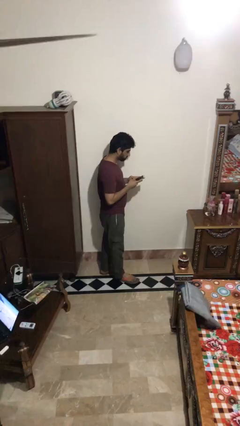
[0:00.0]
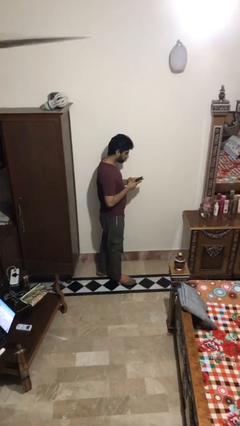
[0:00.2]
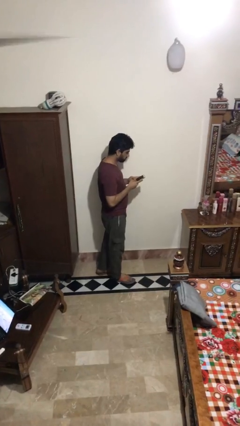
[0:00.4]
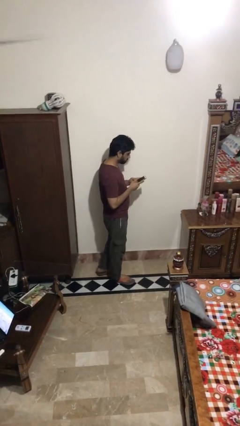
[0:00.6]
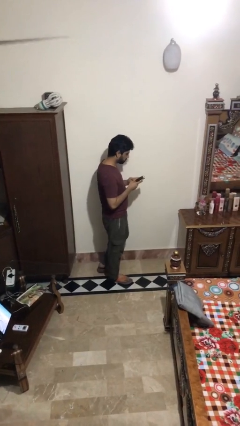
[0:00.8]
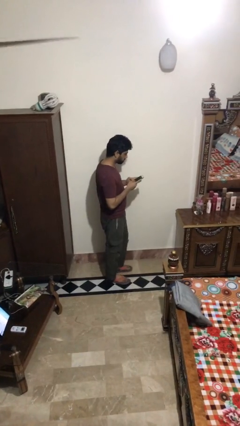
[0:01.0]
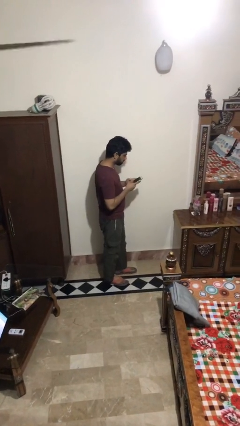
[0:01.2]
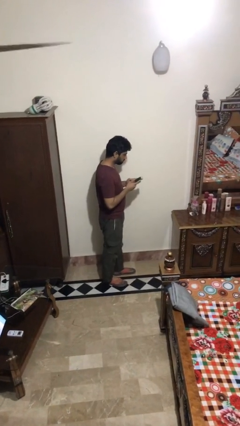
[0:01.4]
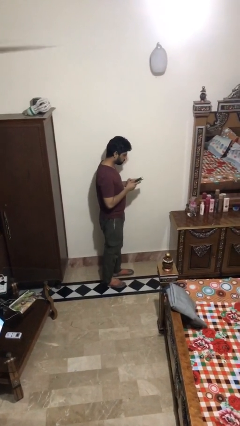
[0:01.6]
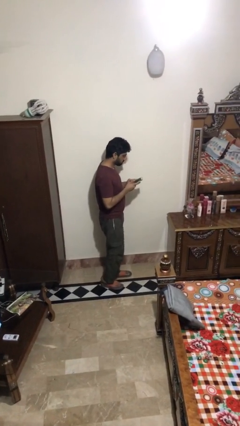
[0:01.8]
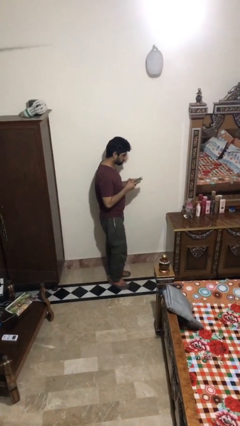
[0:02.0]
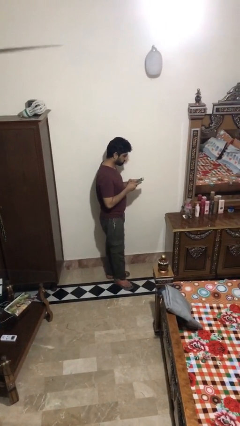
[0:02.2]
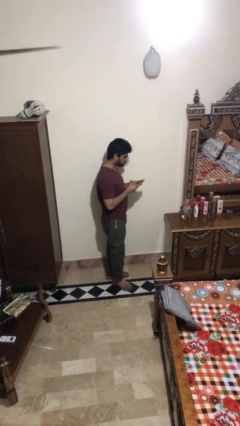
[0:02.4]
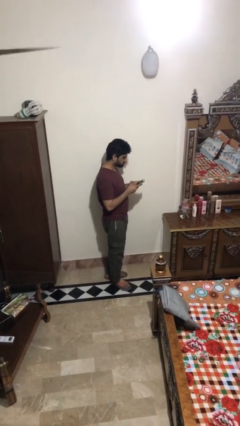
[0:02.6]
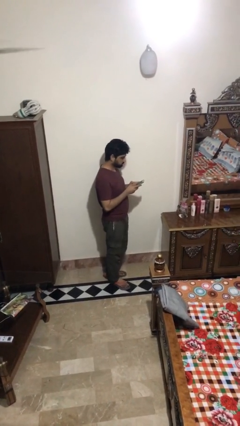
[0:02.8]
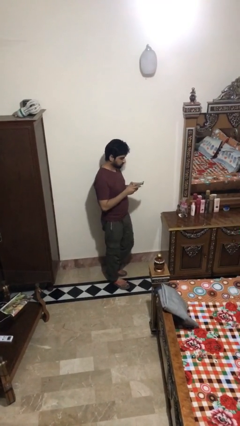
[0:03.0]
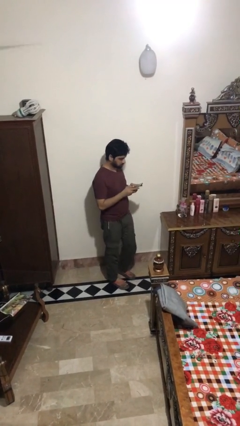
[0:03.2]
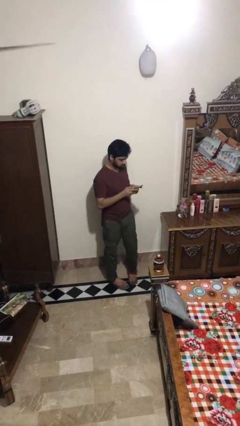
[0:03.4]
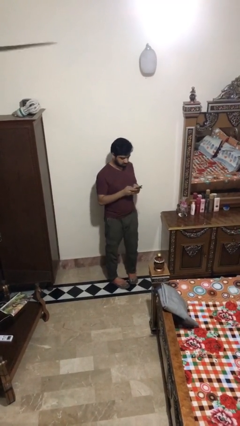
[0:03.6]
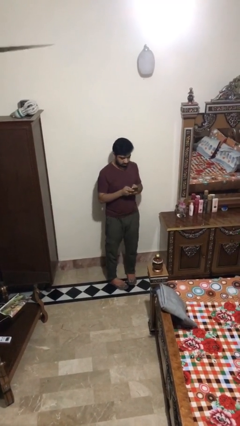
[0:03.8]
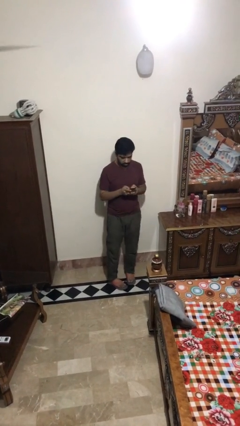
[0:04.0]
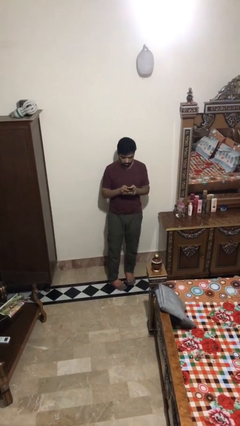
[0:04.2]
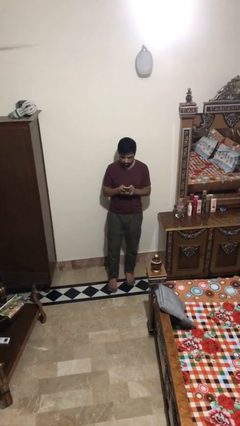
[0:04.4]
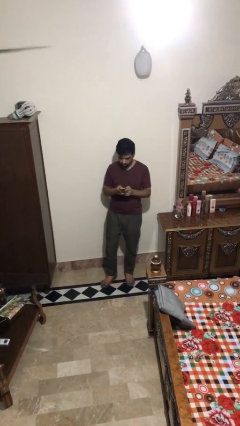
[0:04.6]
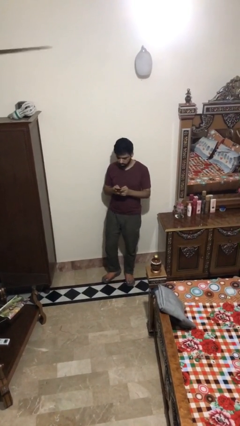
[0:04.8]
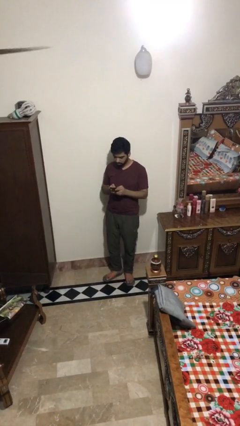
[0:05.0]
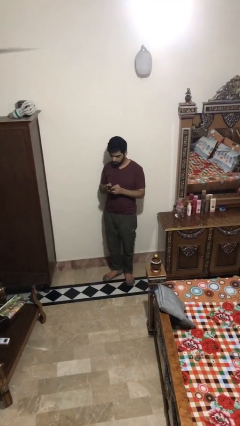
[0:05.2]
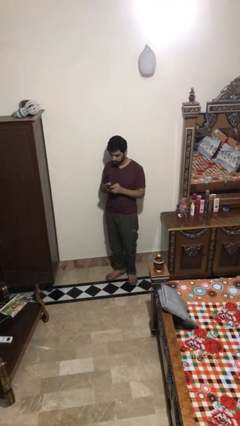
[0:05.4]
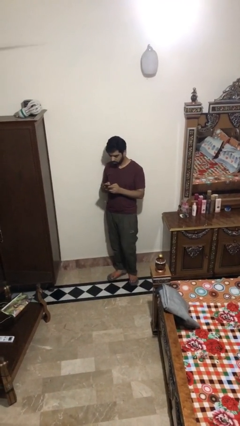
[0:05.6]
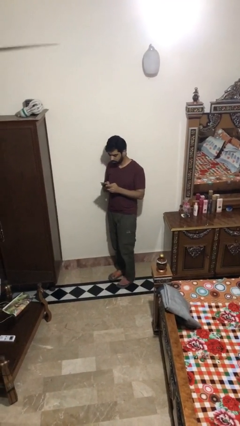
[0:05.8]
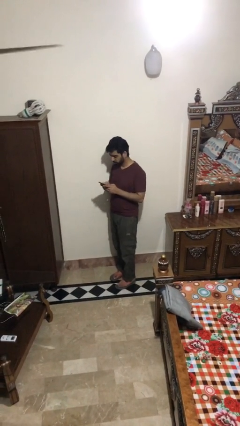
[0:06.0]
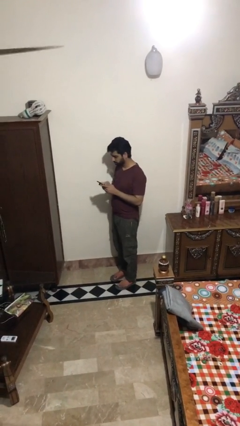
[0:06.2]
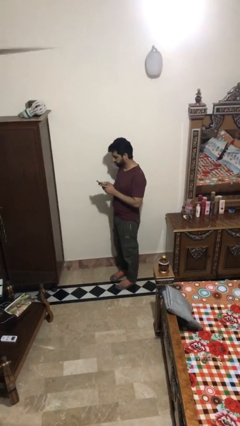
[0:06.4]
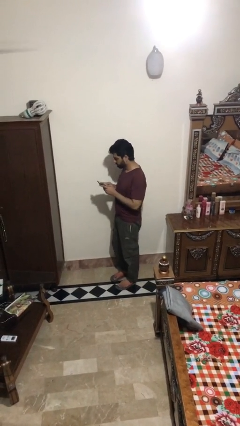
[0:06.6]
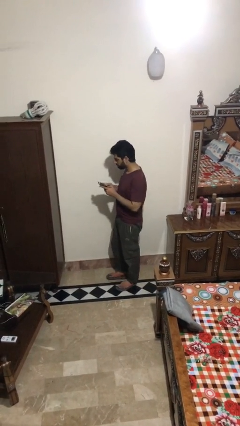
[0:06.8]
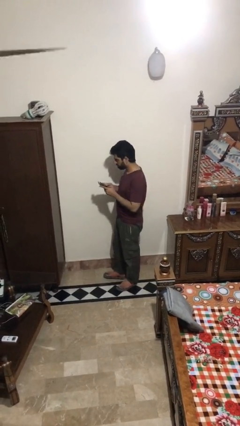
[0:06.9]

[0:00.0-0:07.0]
person texts on phone

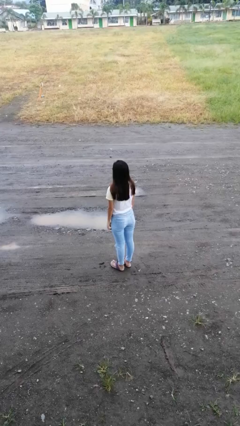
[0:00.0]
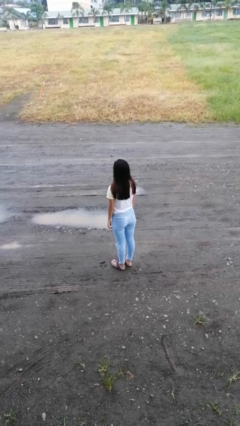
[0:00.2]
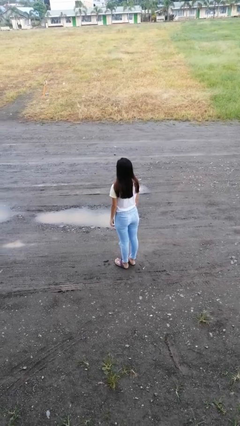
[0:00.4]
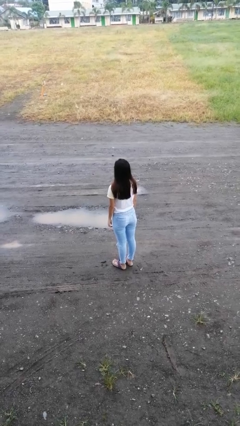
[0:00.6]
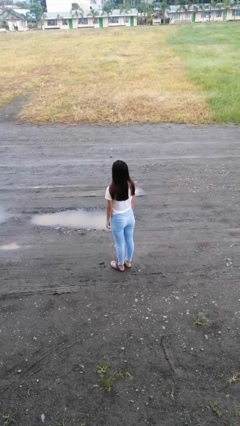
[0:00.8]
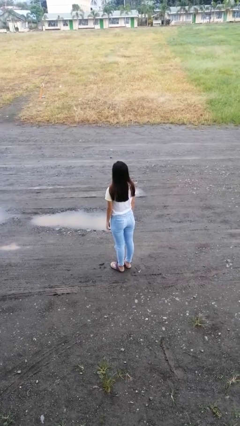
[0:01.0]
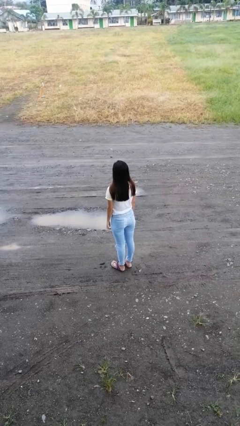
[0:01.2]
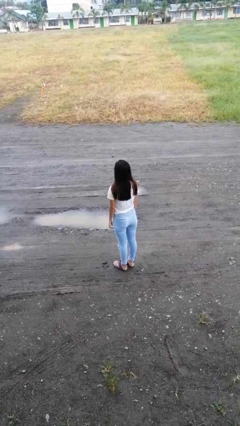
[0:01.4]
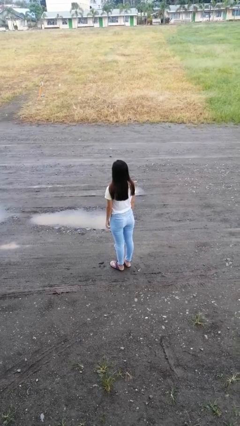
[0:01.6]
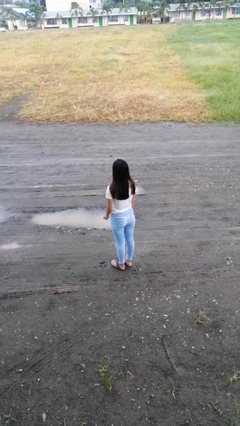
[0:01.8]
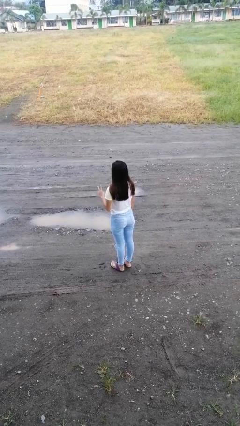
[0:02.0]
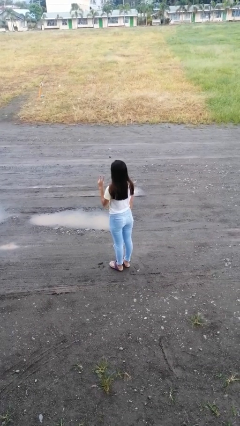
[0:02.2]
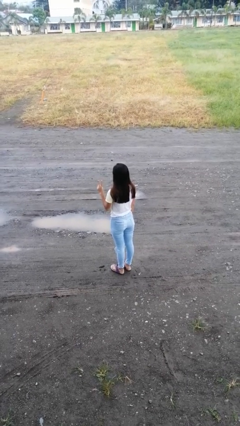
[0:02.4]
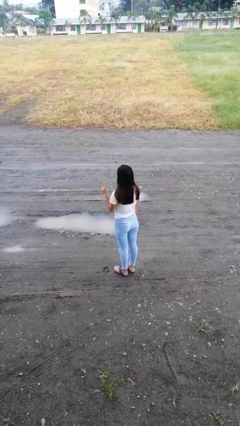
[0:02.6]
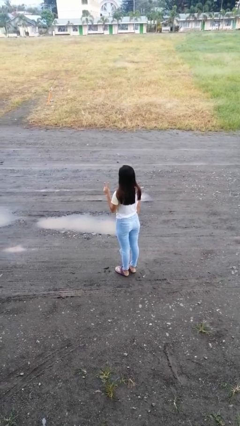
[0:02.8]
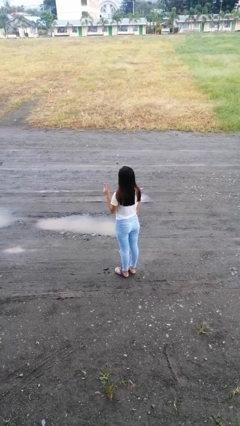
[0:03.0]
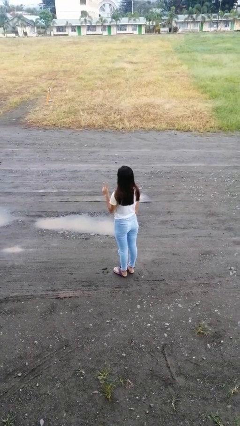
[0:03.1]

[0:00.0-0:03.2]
person gestures peace

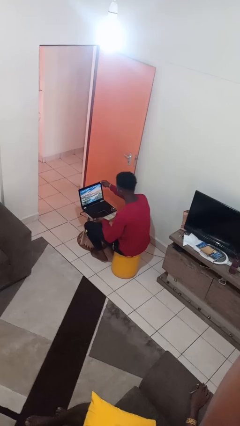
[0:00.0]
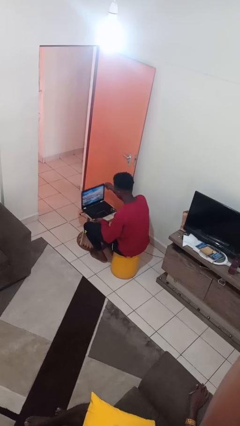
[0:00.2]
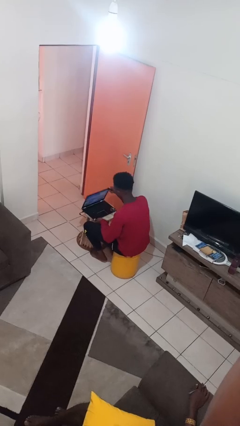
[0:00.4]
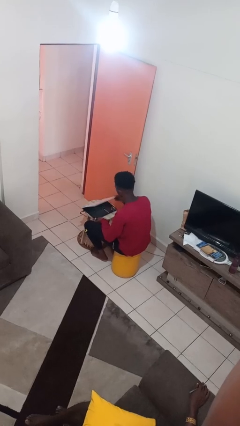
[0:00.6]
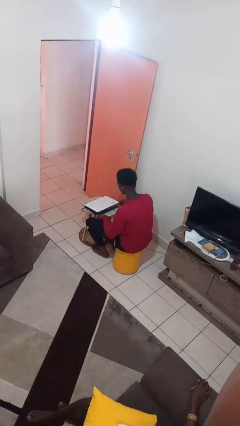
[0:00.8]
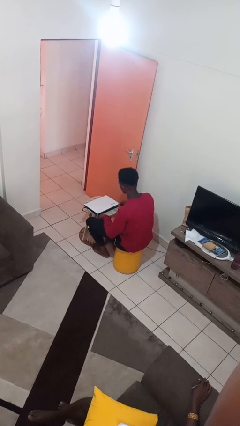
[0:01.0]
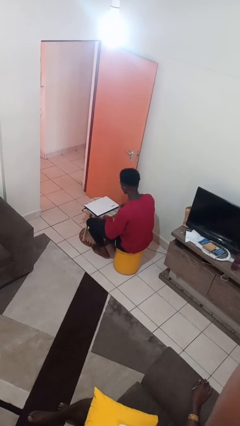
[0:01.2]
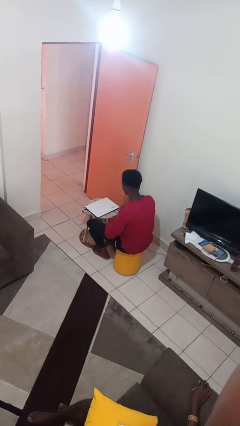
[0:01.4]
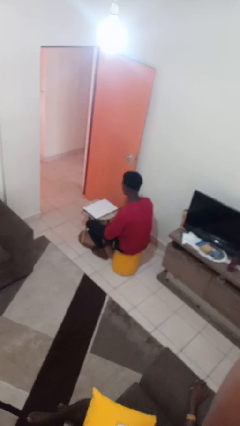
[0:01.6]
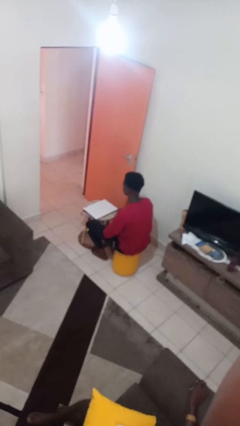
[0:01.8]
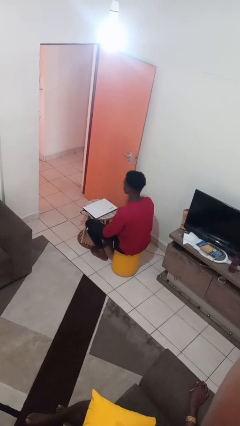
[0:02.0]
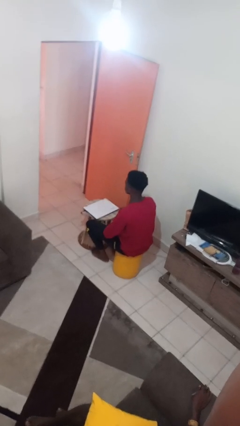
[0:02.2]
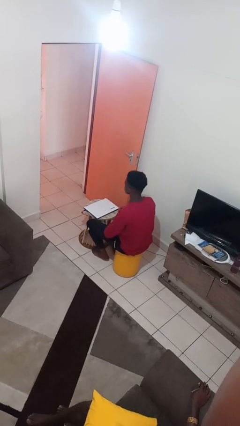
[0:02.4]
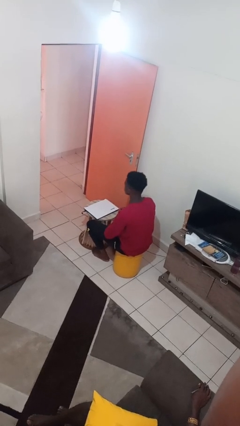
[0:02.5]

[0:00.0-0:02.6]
person closes laptop

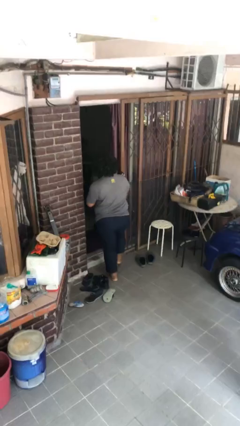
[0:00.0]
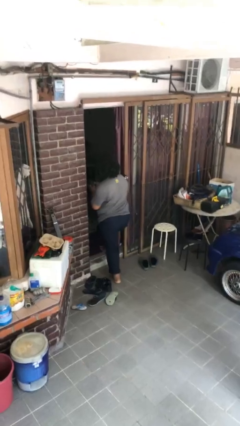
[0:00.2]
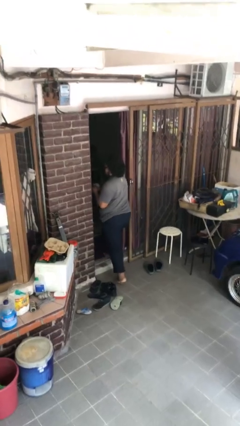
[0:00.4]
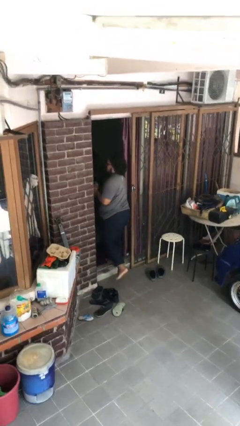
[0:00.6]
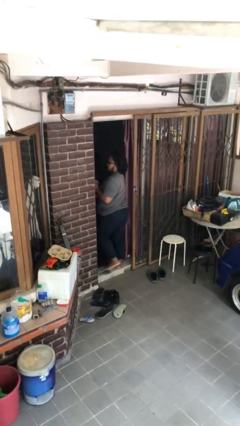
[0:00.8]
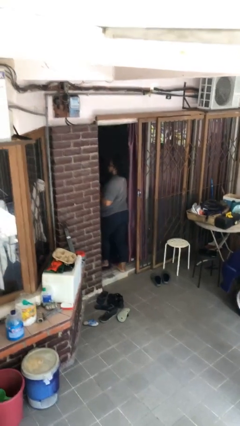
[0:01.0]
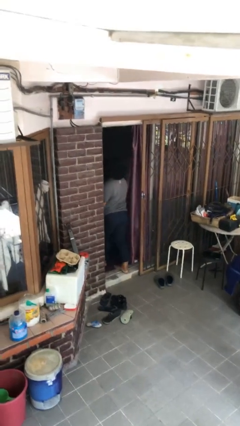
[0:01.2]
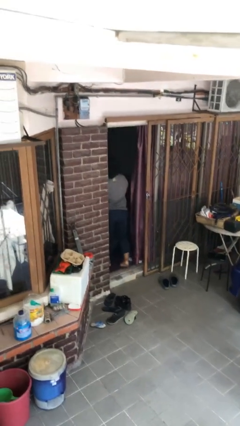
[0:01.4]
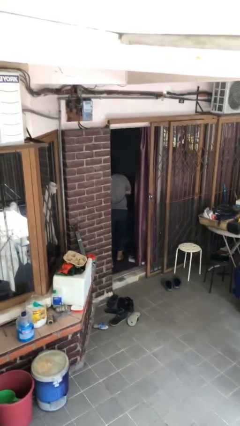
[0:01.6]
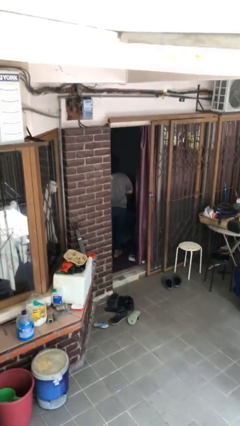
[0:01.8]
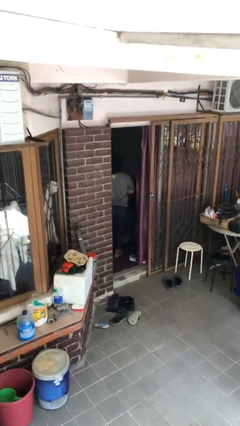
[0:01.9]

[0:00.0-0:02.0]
person exits scene through structure

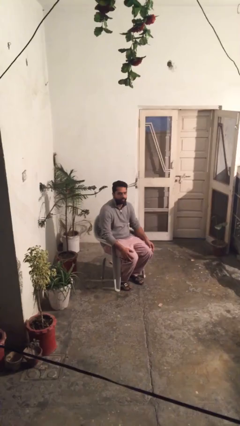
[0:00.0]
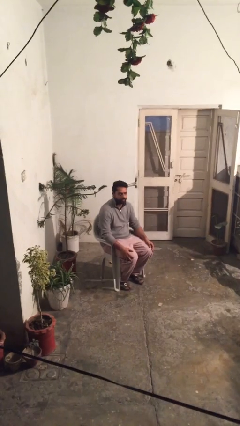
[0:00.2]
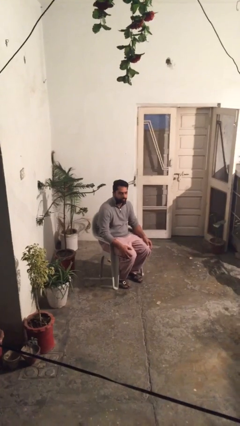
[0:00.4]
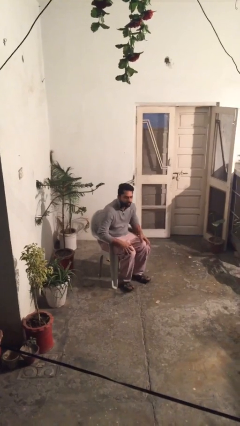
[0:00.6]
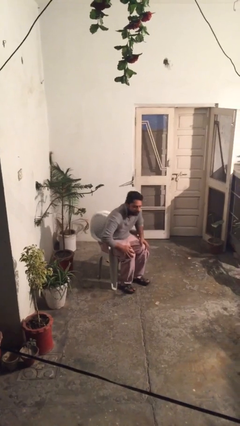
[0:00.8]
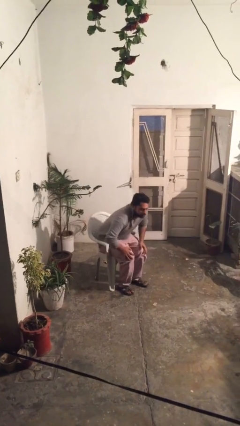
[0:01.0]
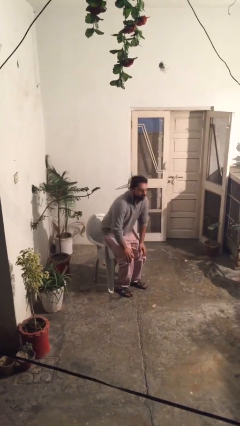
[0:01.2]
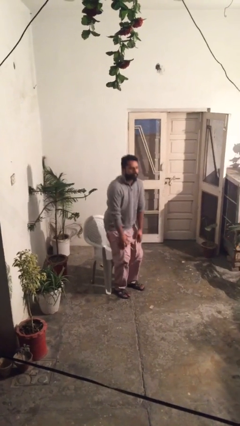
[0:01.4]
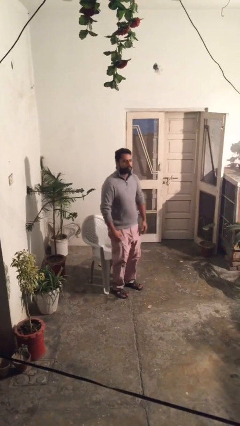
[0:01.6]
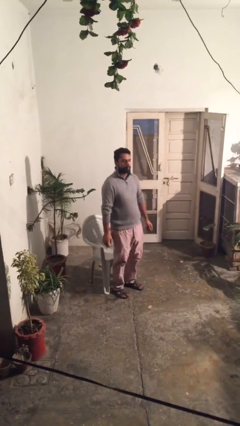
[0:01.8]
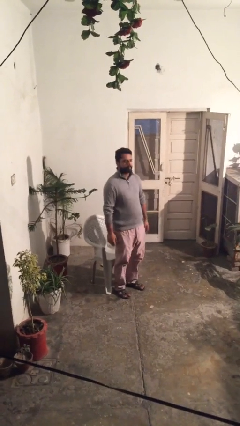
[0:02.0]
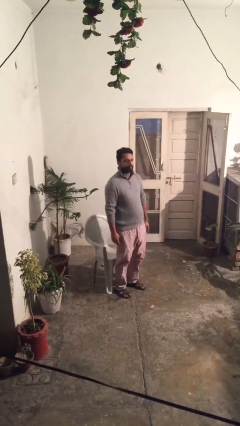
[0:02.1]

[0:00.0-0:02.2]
person stands up

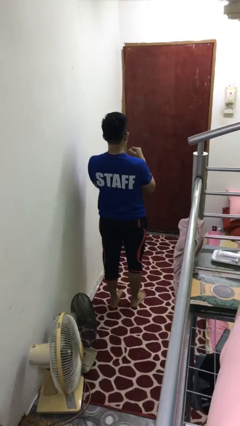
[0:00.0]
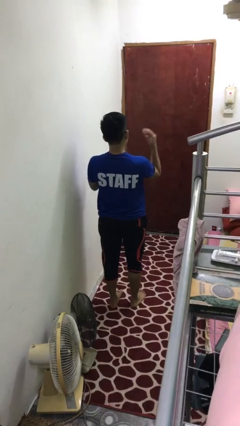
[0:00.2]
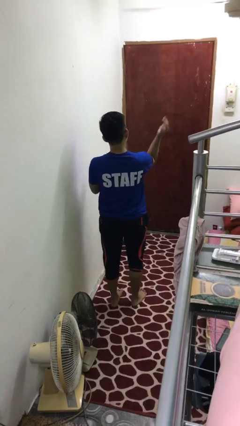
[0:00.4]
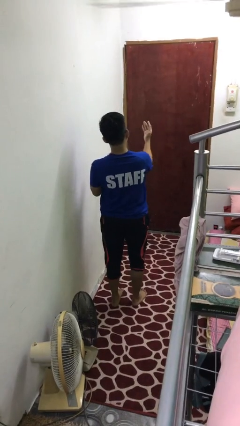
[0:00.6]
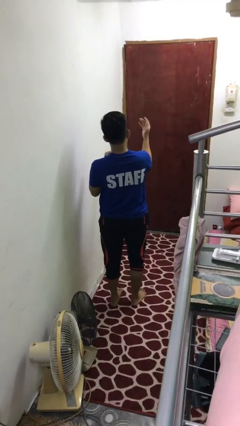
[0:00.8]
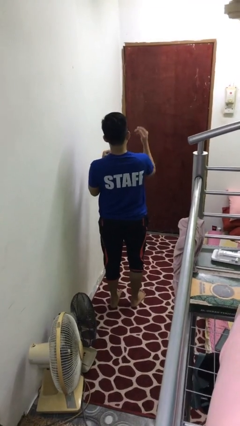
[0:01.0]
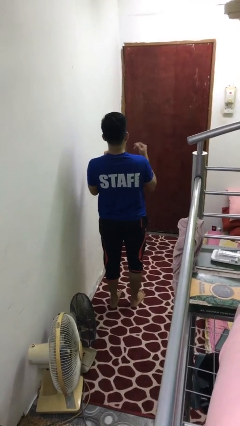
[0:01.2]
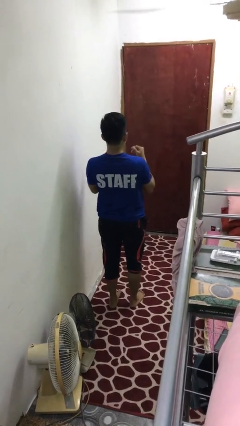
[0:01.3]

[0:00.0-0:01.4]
person karate chop
